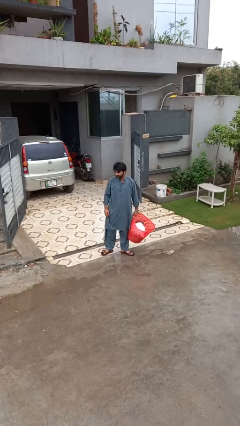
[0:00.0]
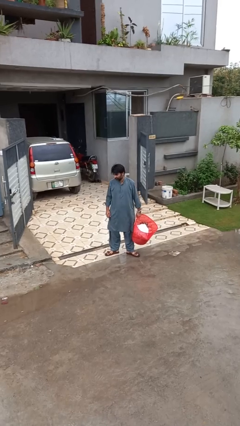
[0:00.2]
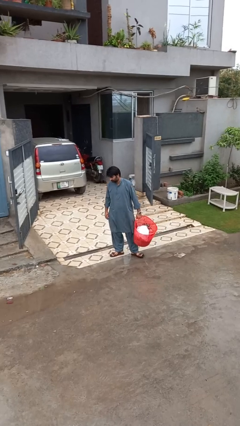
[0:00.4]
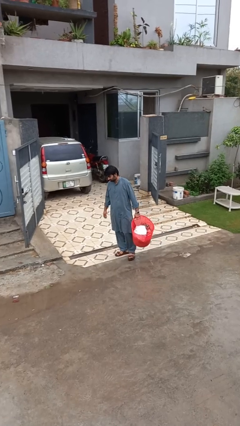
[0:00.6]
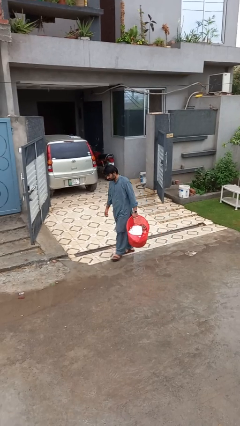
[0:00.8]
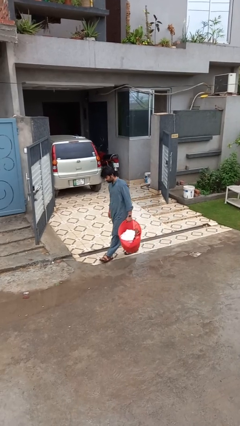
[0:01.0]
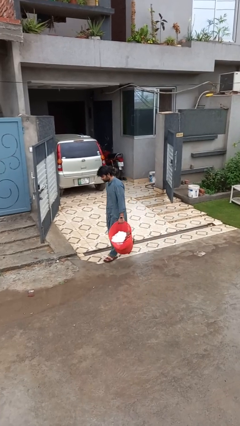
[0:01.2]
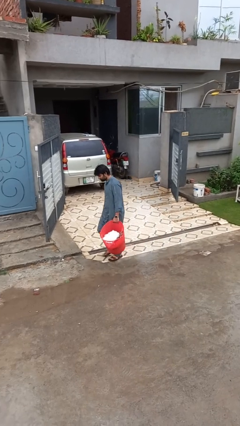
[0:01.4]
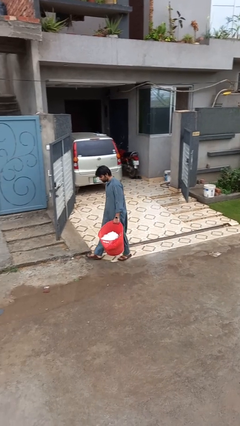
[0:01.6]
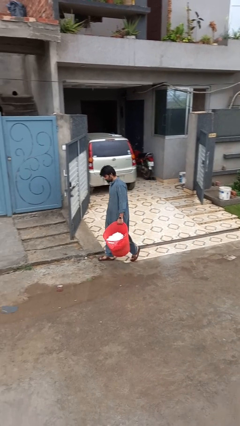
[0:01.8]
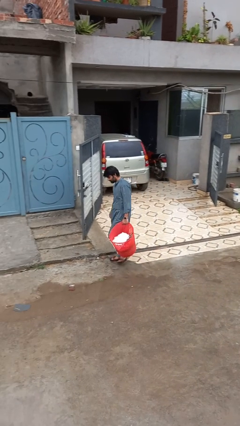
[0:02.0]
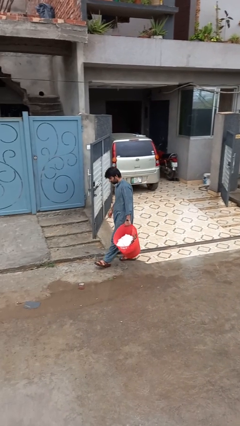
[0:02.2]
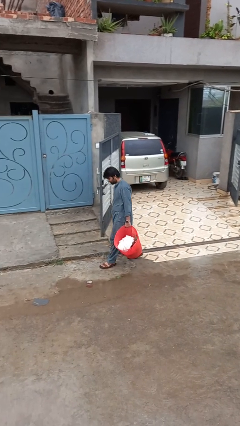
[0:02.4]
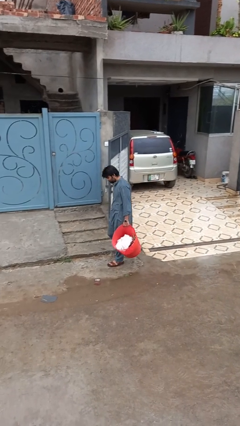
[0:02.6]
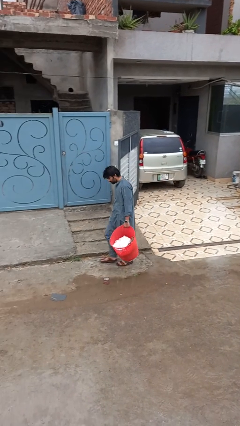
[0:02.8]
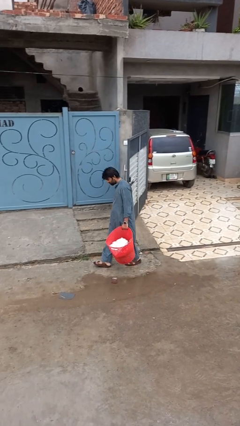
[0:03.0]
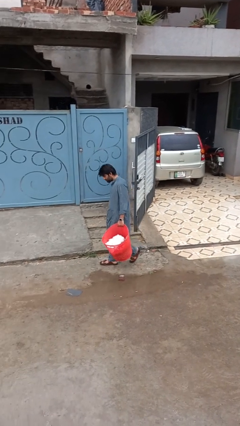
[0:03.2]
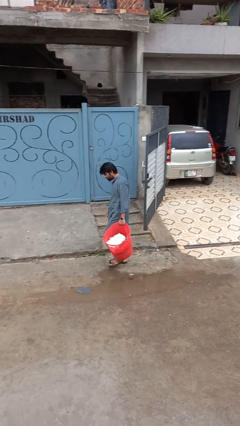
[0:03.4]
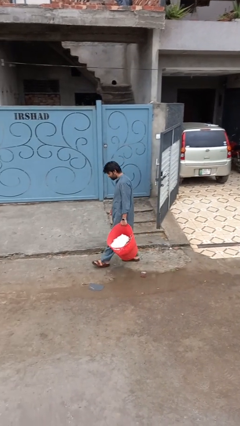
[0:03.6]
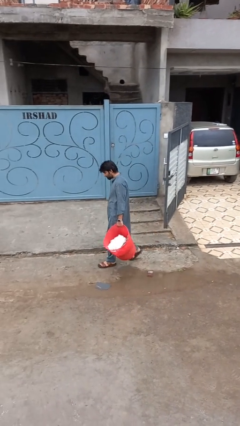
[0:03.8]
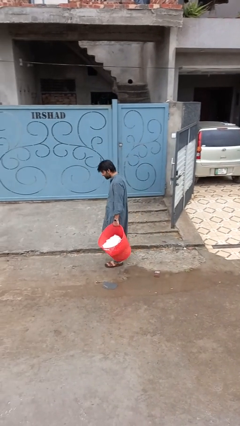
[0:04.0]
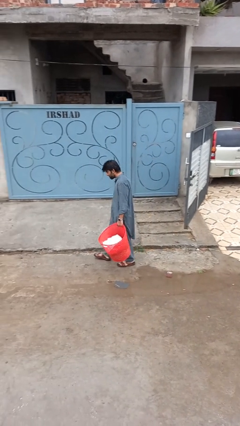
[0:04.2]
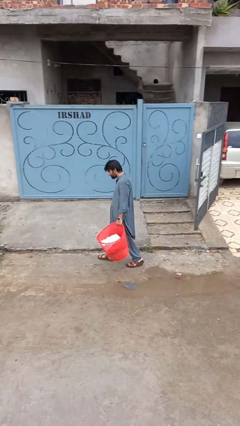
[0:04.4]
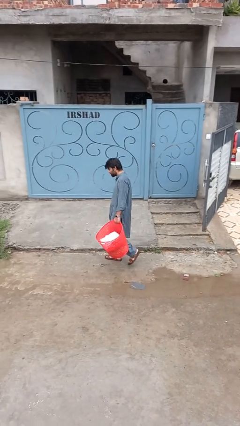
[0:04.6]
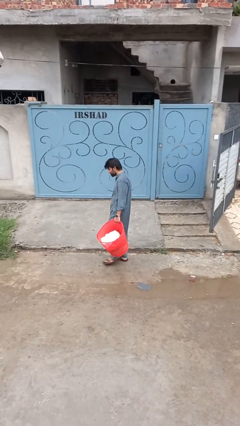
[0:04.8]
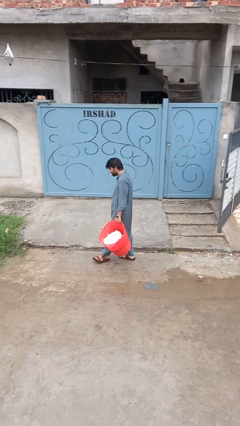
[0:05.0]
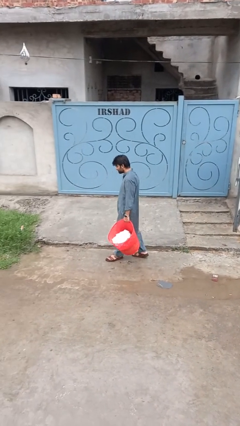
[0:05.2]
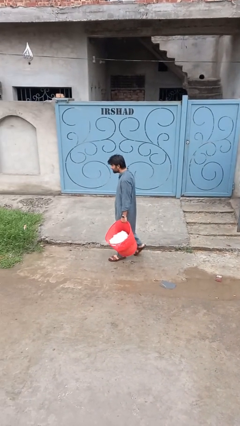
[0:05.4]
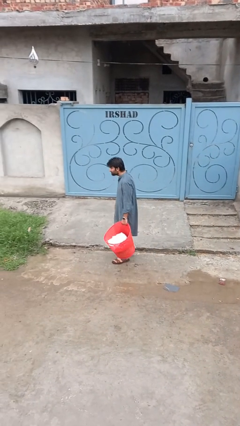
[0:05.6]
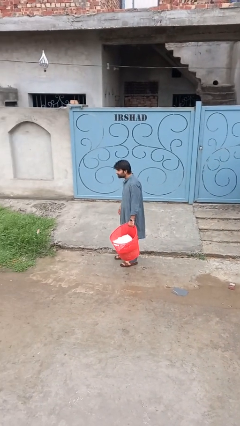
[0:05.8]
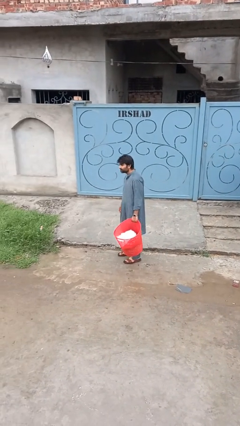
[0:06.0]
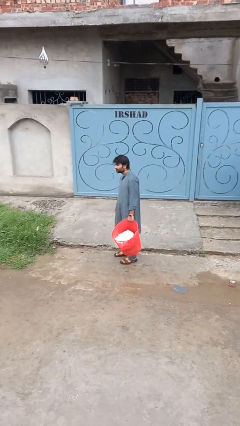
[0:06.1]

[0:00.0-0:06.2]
person carries laundry basket

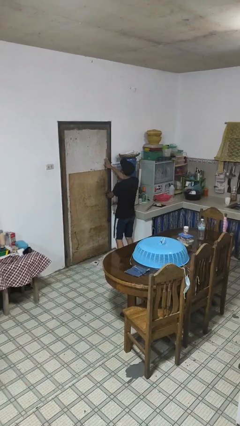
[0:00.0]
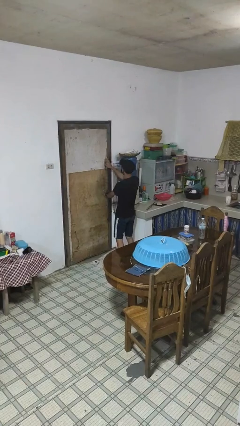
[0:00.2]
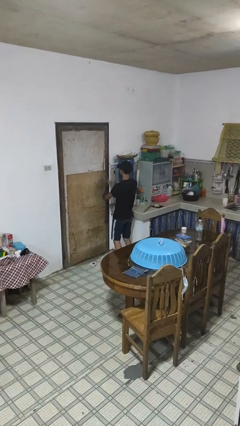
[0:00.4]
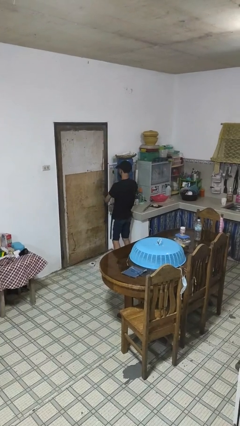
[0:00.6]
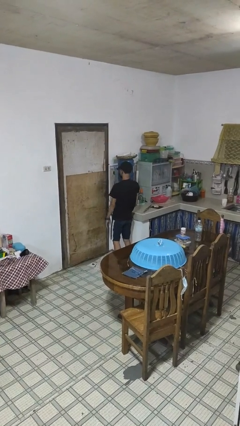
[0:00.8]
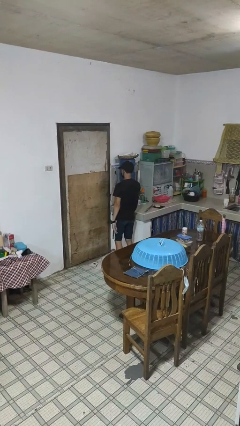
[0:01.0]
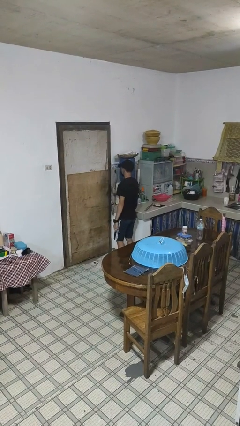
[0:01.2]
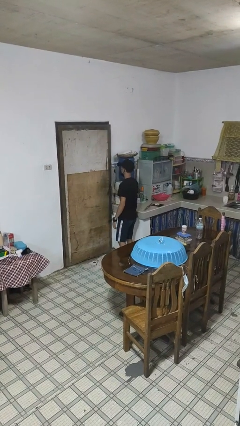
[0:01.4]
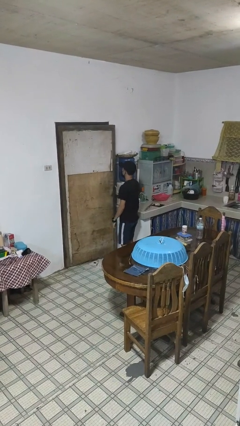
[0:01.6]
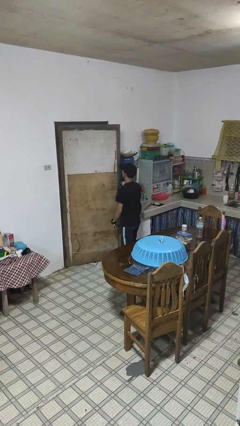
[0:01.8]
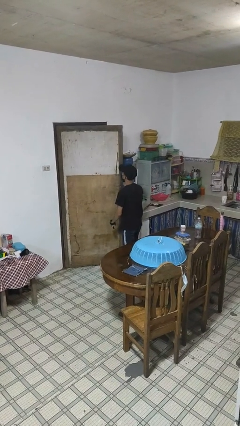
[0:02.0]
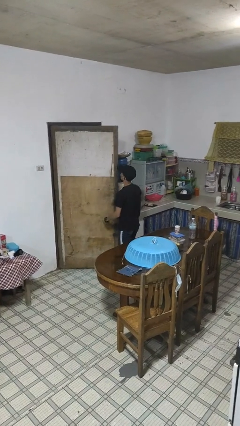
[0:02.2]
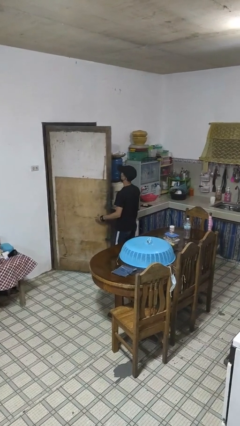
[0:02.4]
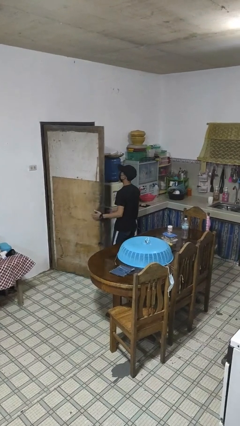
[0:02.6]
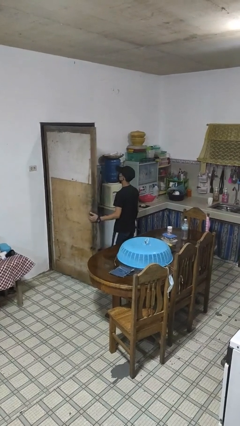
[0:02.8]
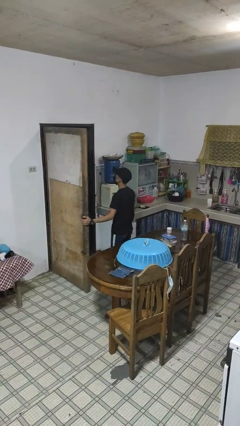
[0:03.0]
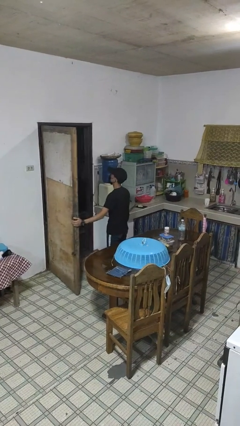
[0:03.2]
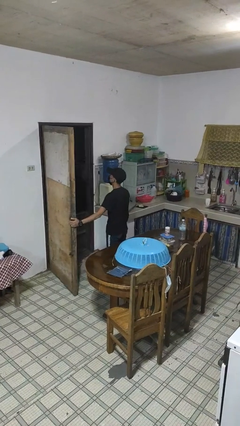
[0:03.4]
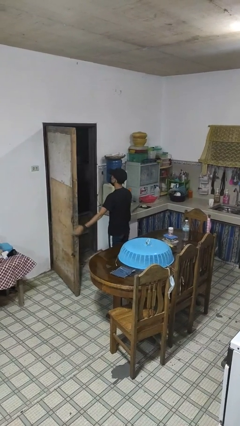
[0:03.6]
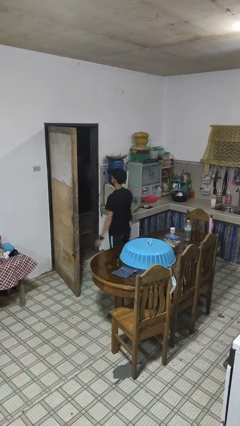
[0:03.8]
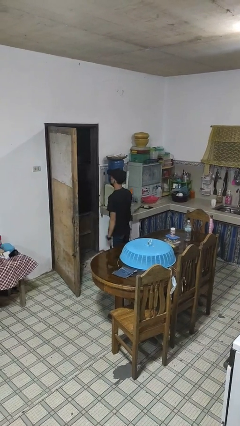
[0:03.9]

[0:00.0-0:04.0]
person opens facility door

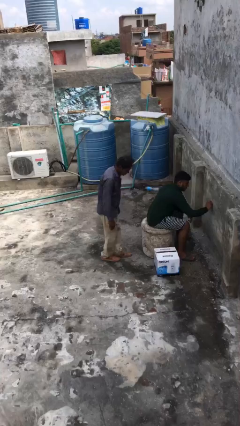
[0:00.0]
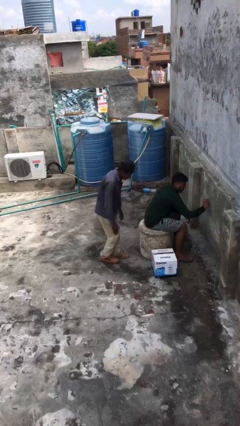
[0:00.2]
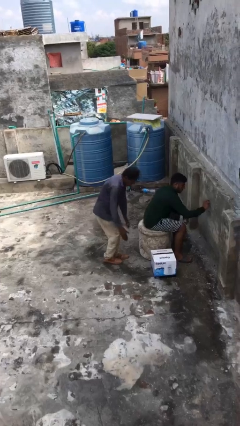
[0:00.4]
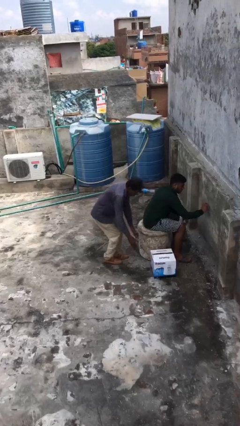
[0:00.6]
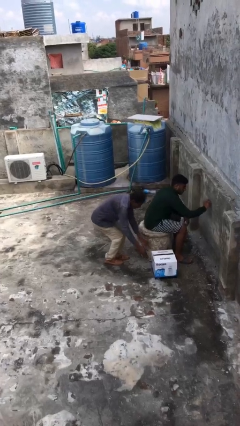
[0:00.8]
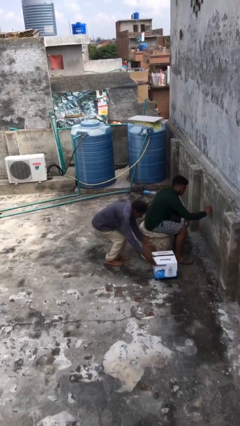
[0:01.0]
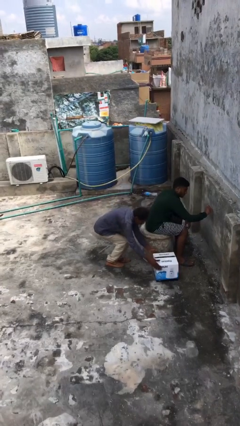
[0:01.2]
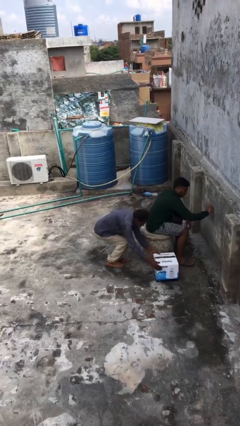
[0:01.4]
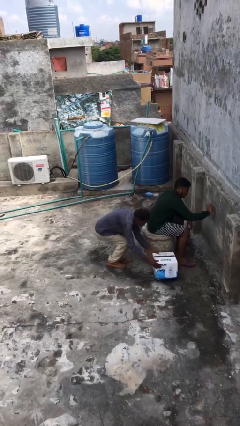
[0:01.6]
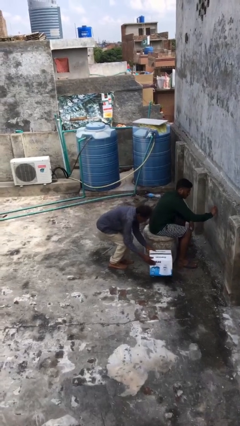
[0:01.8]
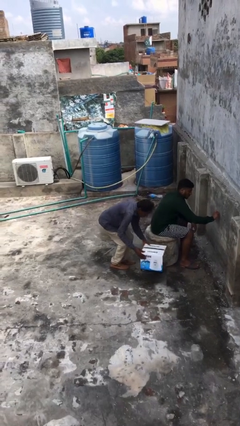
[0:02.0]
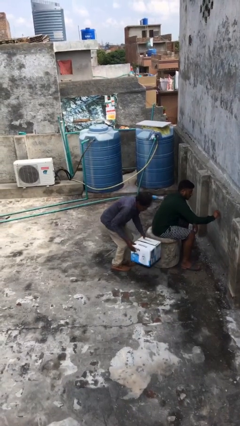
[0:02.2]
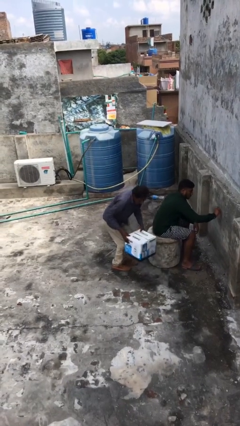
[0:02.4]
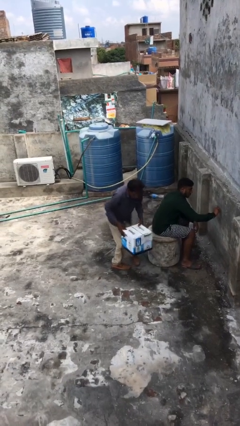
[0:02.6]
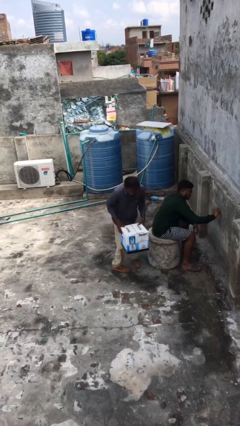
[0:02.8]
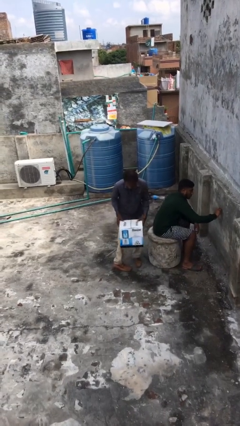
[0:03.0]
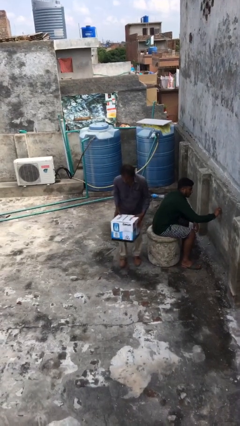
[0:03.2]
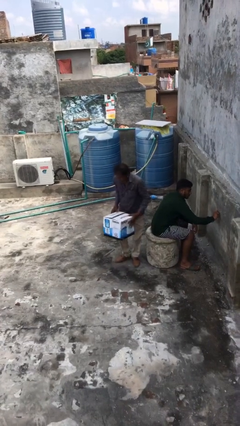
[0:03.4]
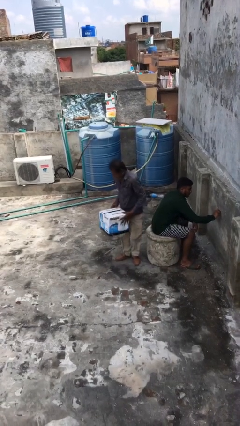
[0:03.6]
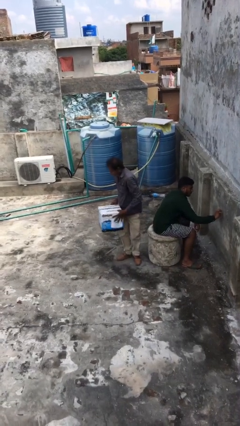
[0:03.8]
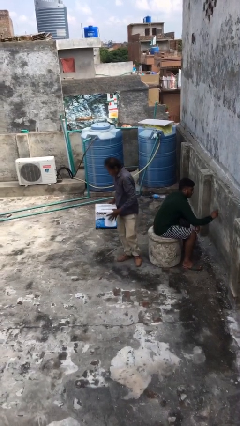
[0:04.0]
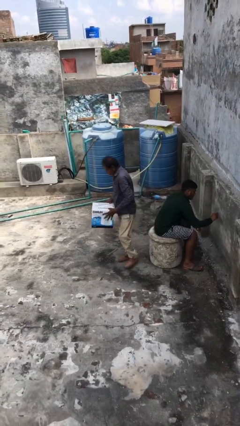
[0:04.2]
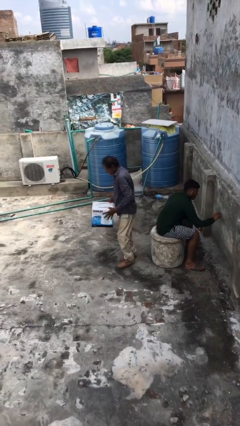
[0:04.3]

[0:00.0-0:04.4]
person steals object from person

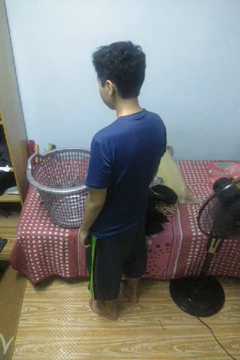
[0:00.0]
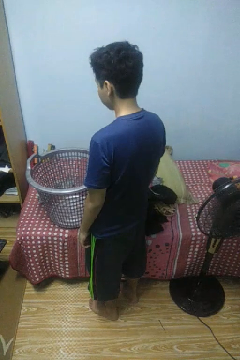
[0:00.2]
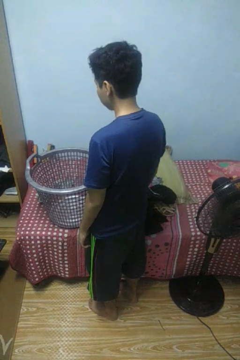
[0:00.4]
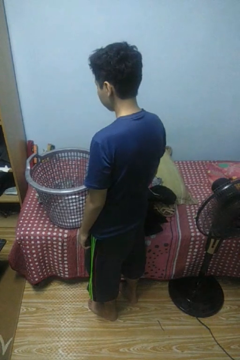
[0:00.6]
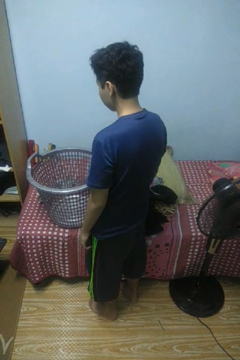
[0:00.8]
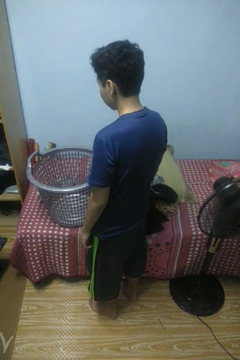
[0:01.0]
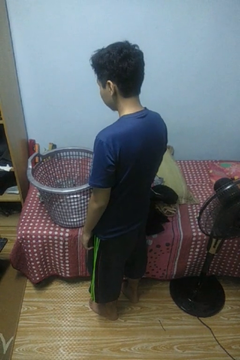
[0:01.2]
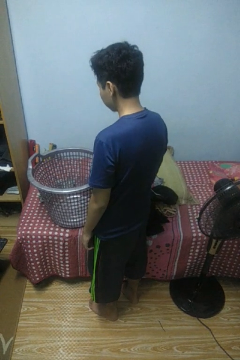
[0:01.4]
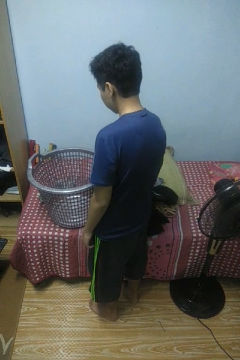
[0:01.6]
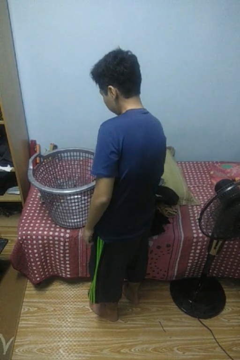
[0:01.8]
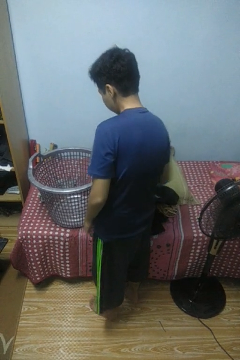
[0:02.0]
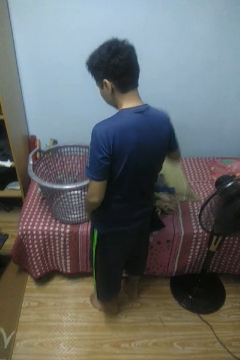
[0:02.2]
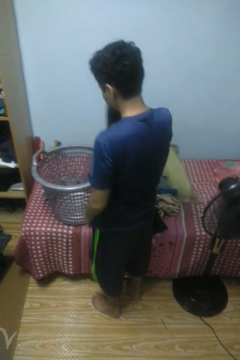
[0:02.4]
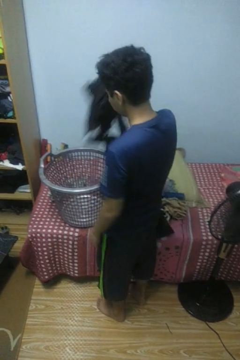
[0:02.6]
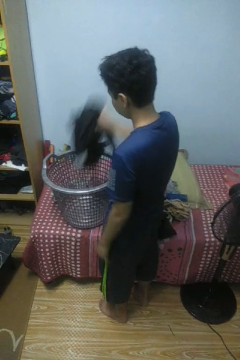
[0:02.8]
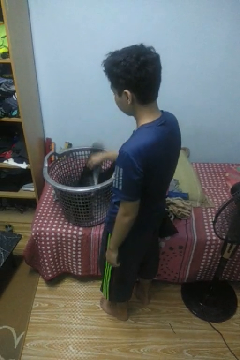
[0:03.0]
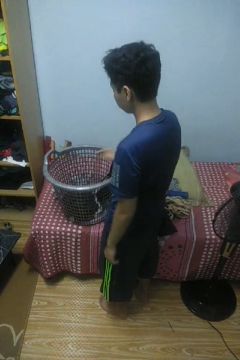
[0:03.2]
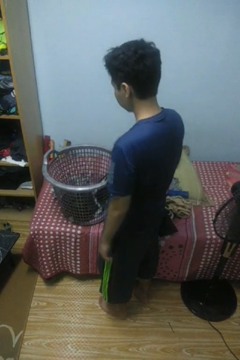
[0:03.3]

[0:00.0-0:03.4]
person loads clothes into suitcase
